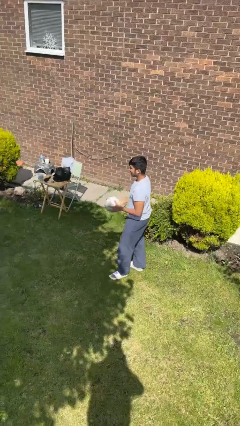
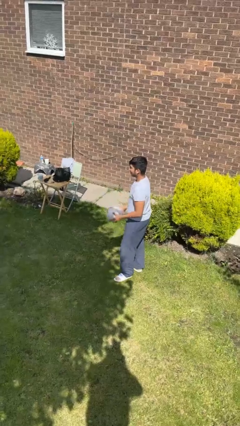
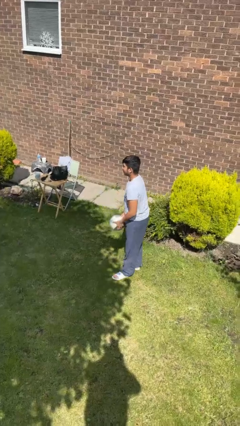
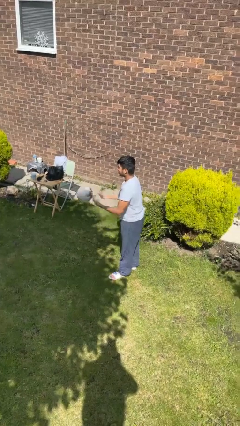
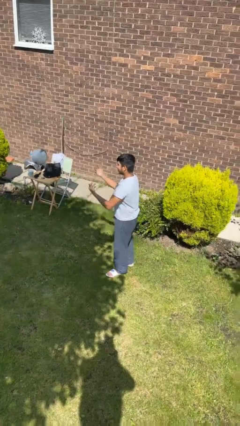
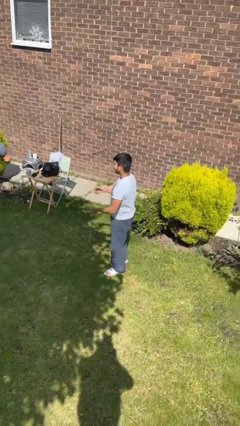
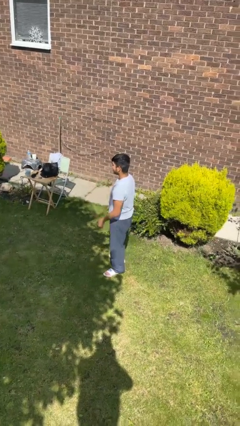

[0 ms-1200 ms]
person throws object to person

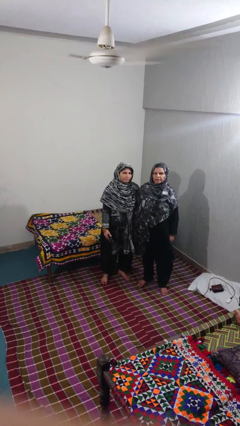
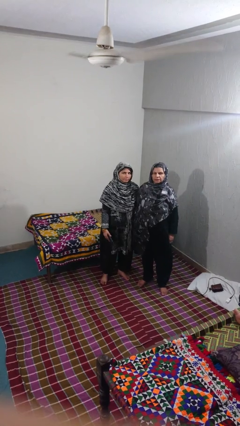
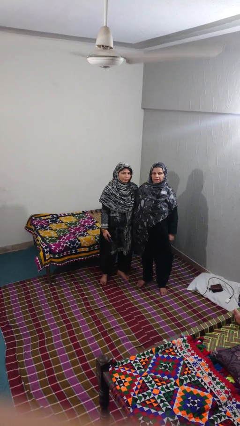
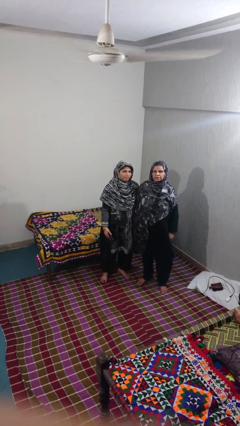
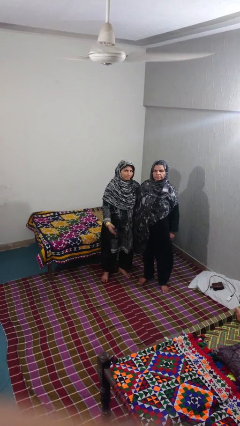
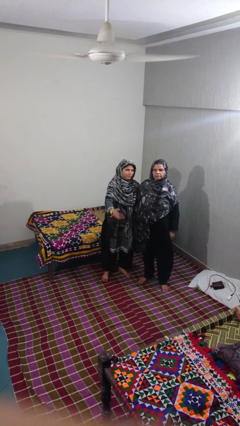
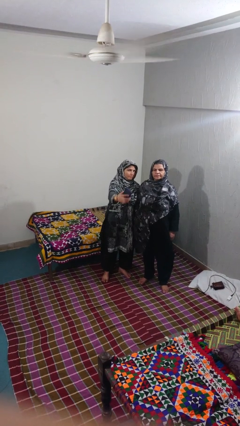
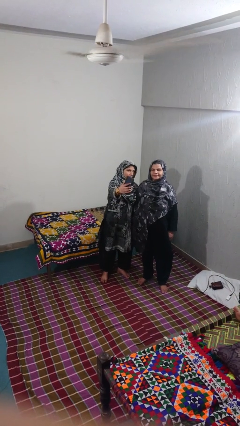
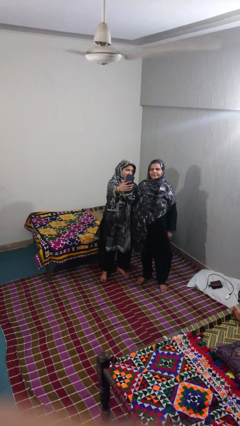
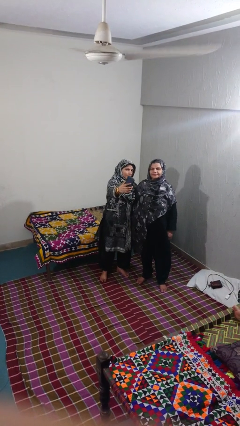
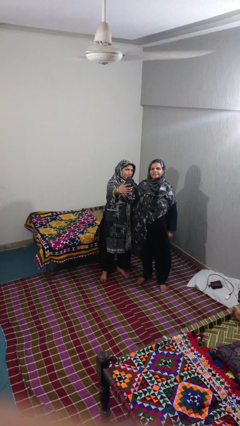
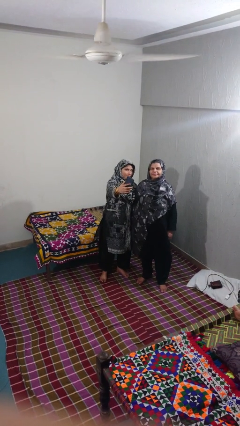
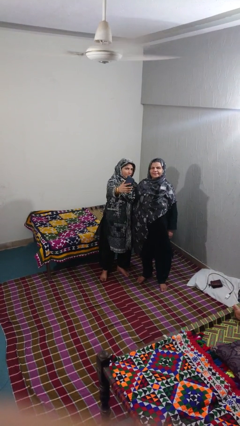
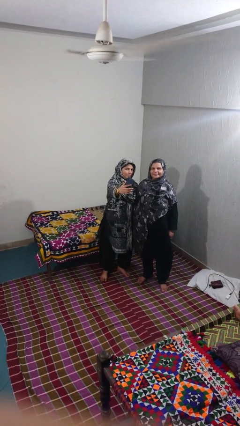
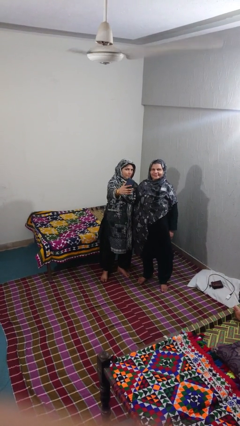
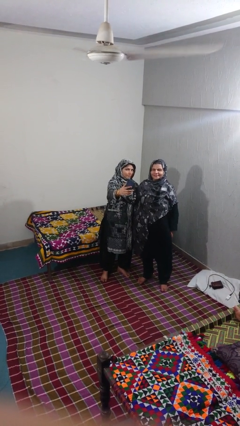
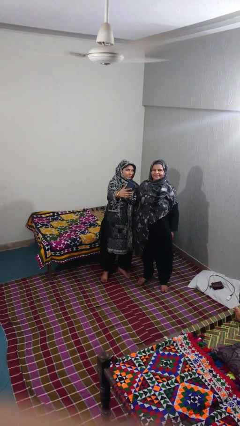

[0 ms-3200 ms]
person takes selfie with person

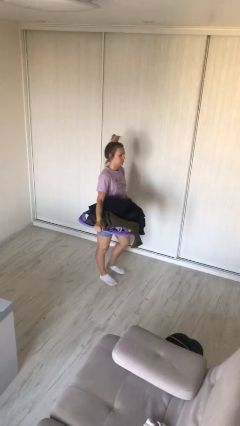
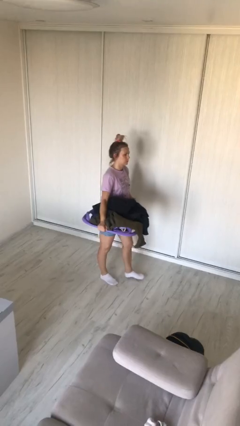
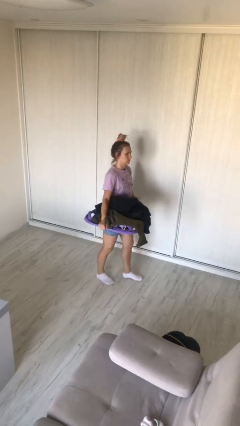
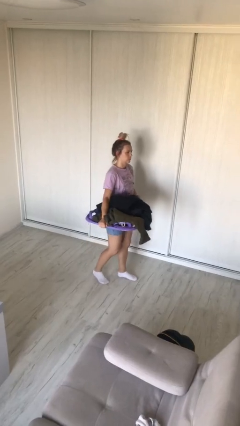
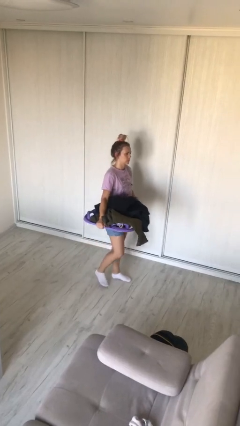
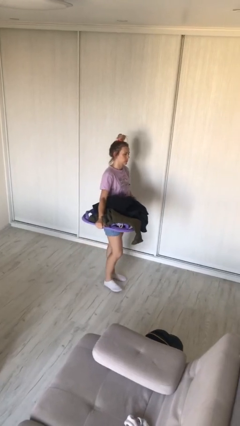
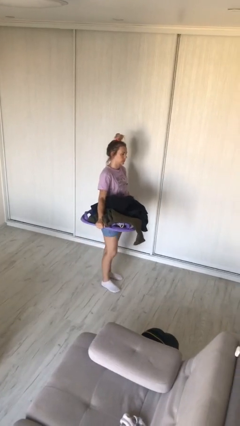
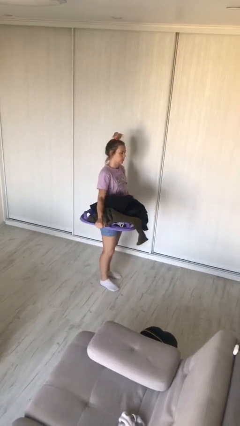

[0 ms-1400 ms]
person carries laundry basket

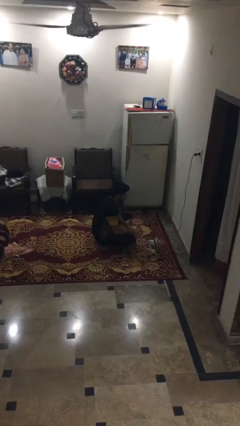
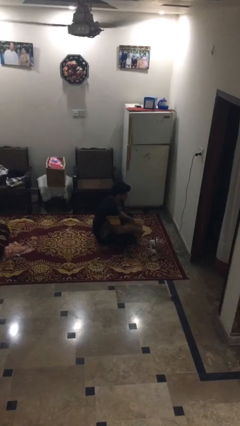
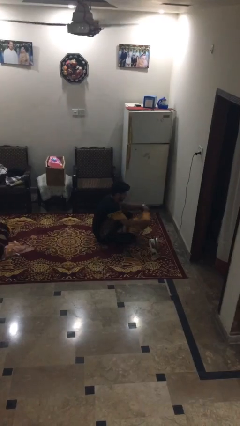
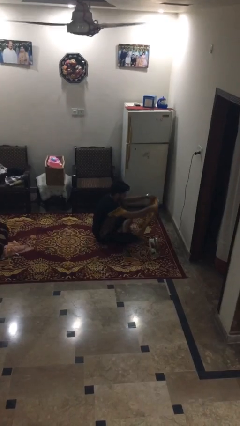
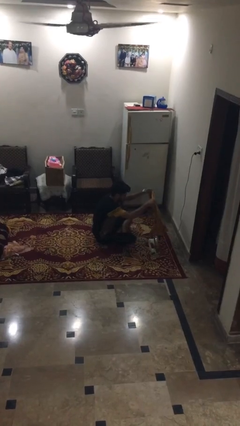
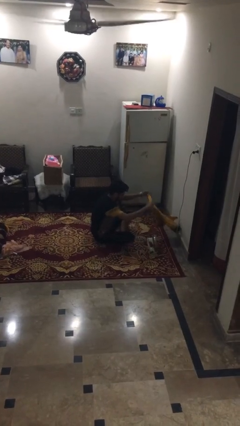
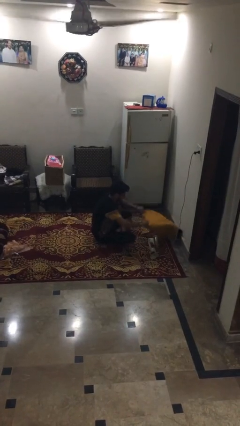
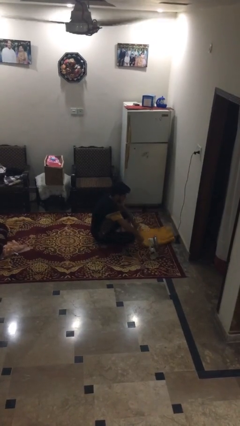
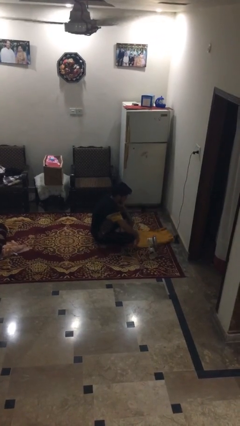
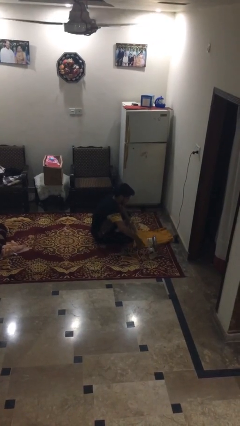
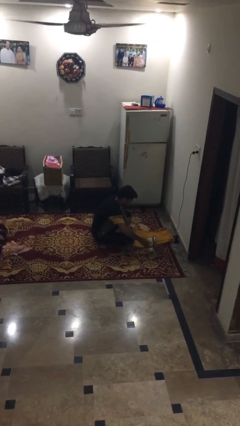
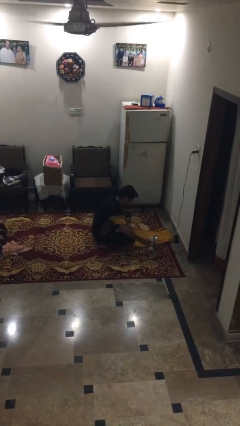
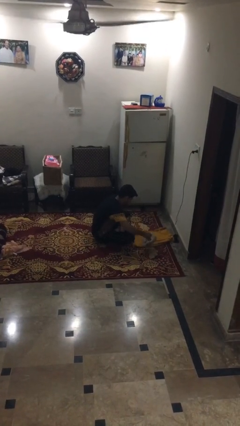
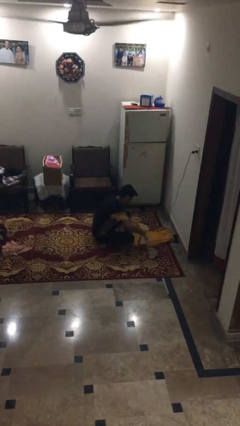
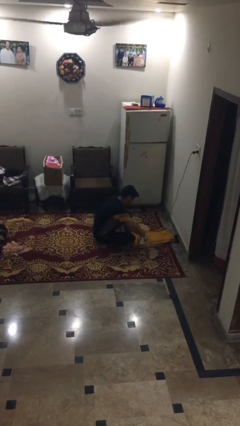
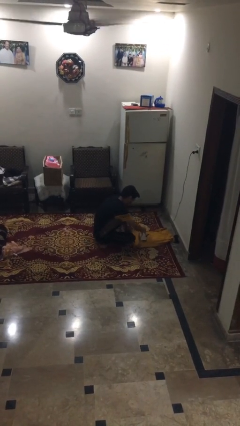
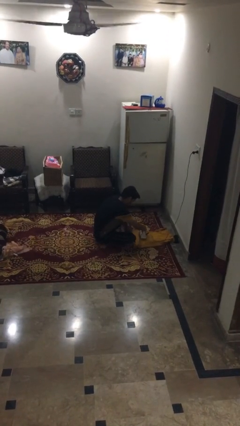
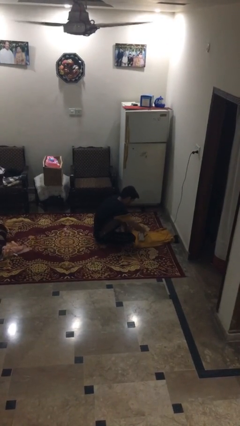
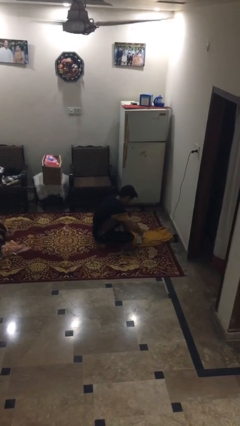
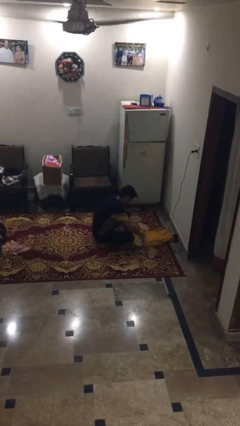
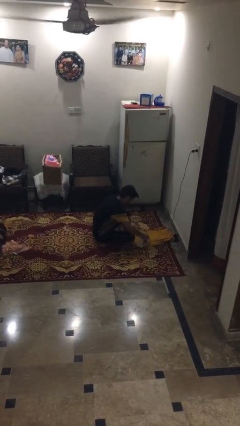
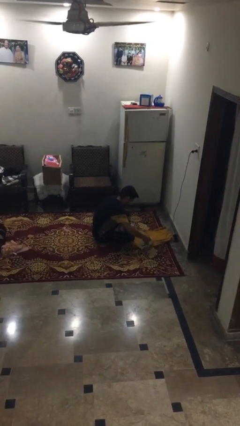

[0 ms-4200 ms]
person irons clothes

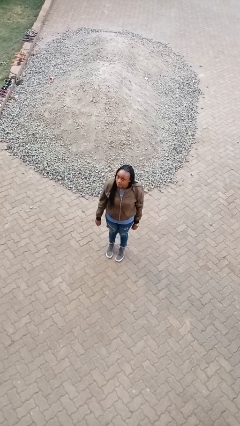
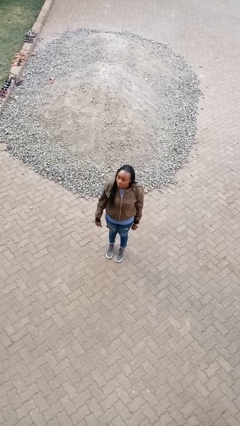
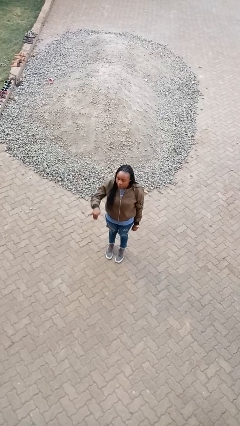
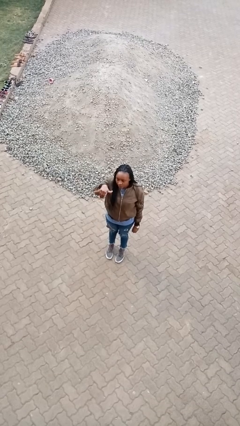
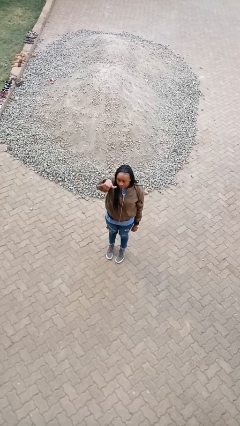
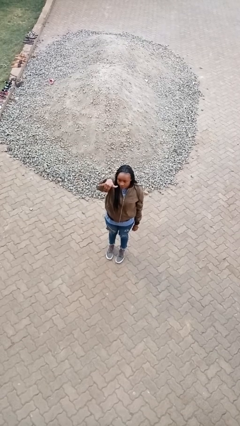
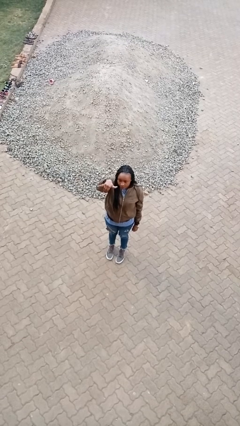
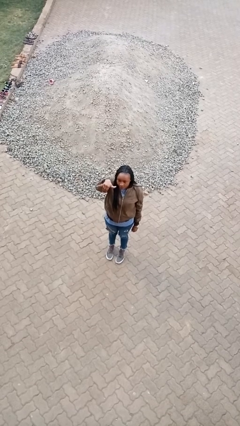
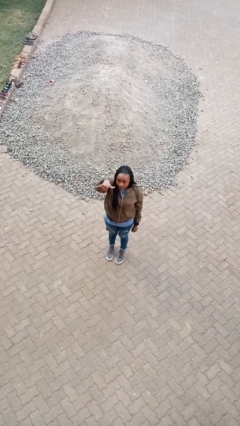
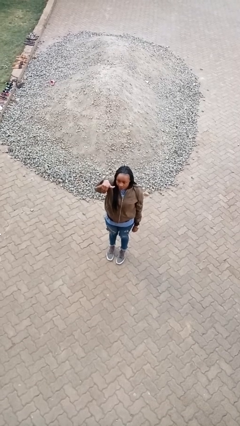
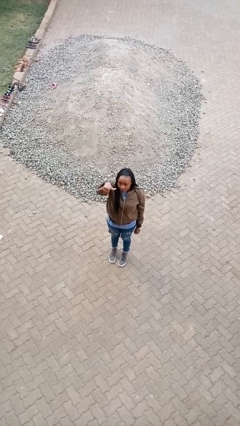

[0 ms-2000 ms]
person gestures hang loose

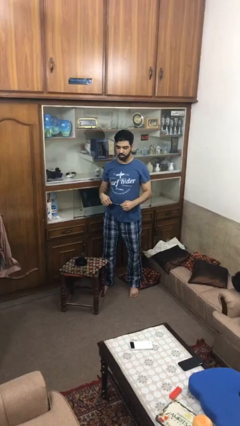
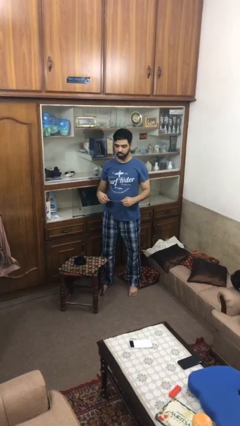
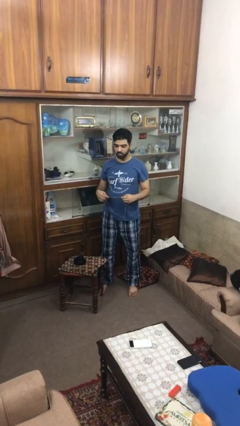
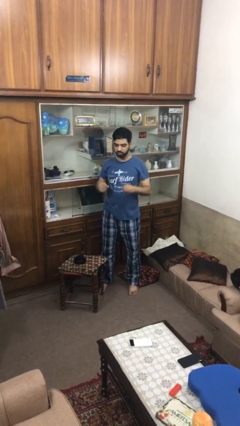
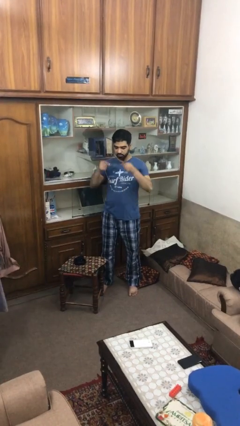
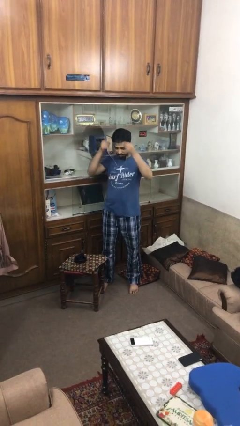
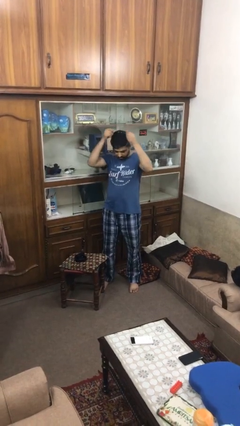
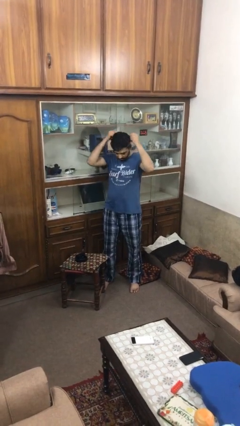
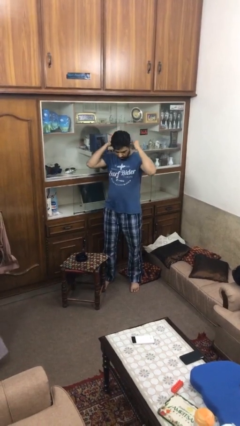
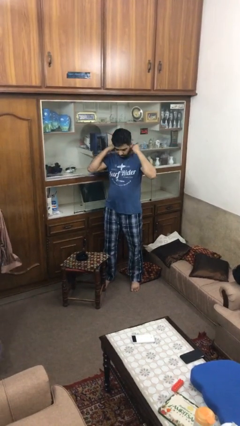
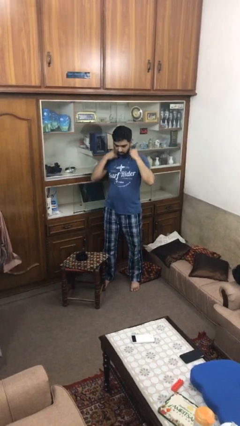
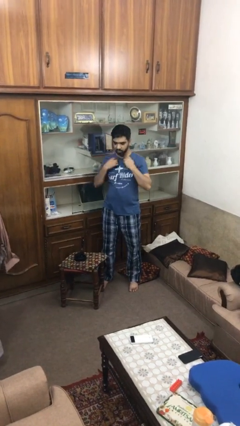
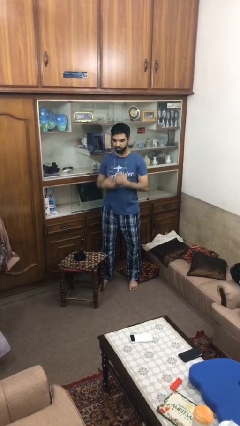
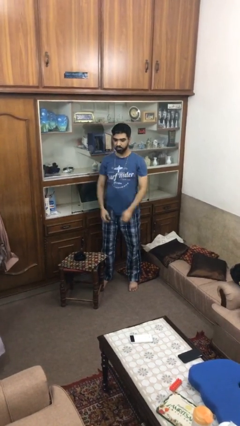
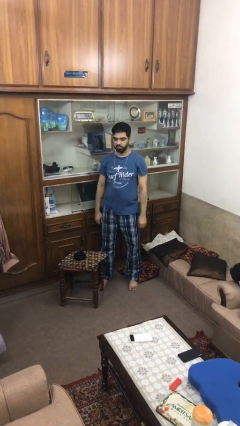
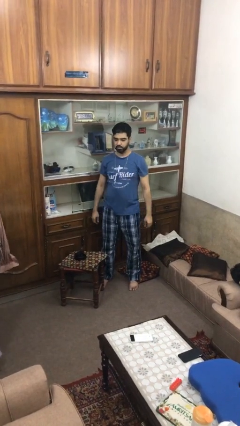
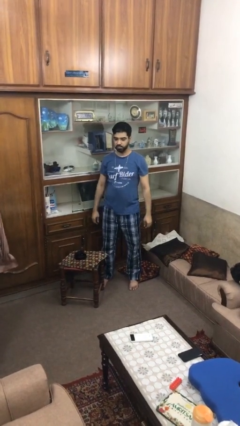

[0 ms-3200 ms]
person puts on necklace

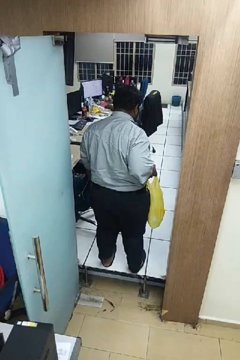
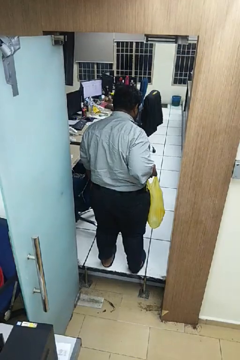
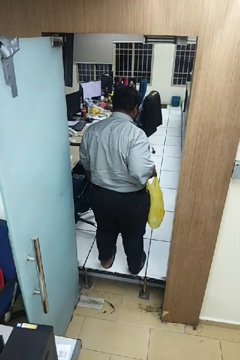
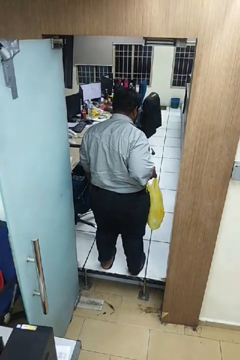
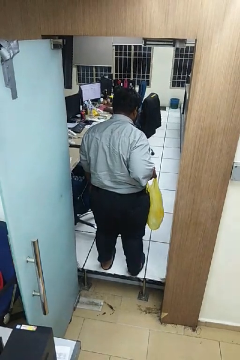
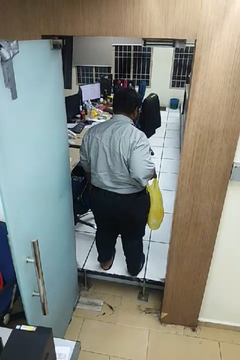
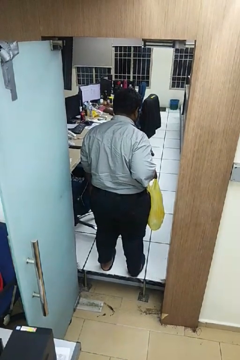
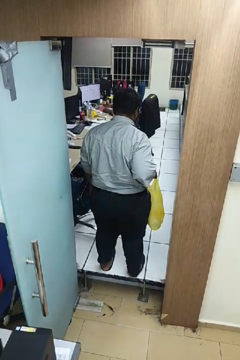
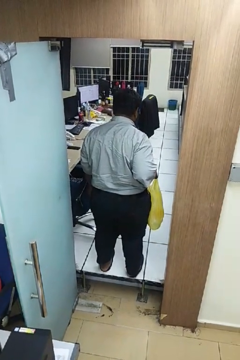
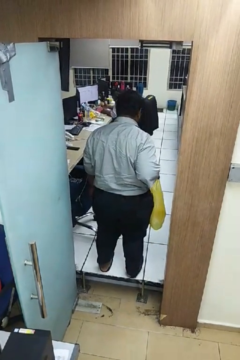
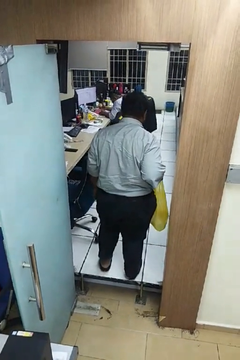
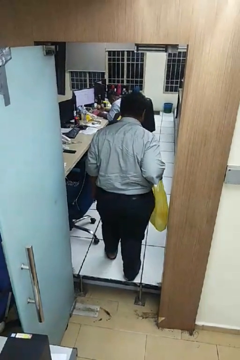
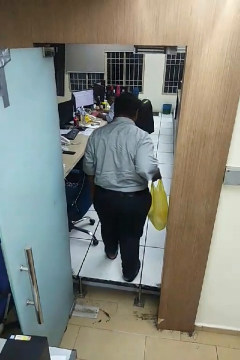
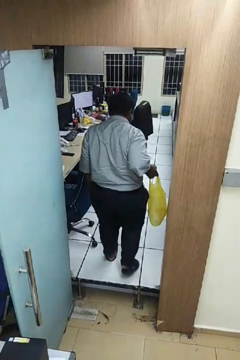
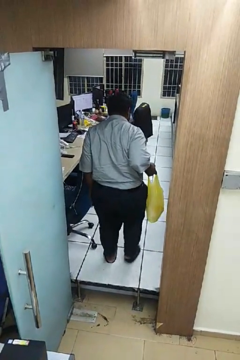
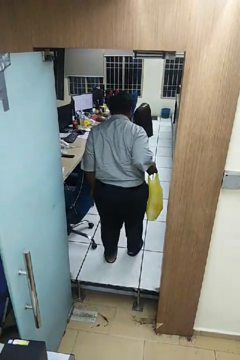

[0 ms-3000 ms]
person carries groceries
